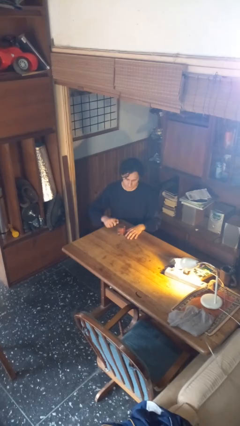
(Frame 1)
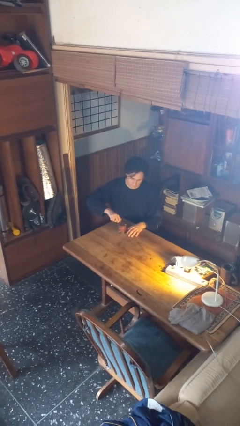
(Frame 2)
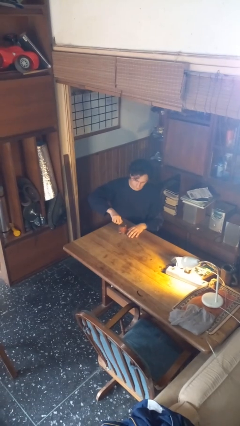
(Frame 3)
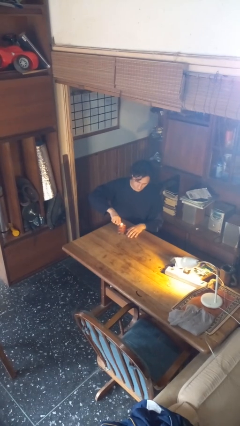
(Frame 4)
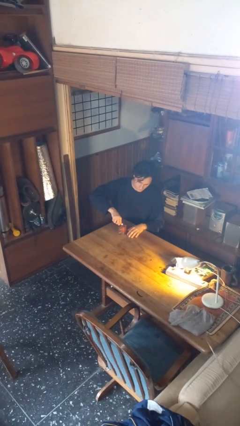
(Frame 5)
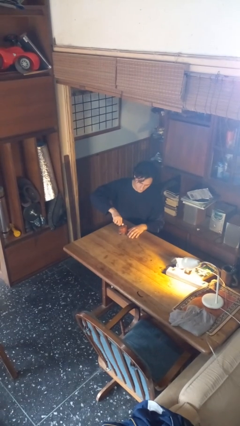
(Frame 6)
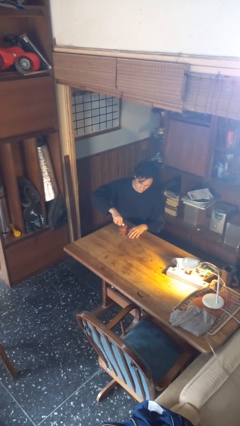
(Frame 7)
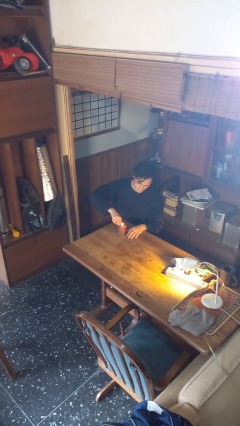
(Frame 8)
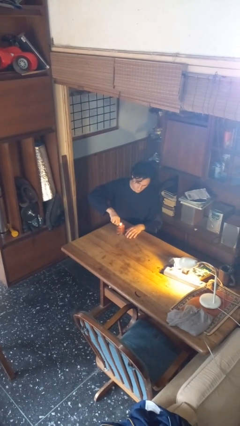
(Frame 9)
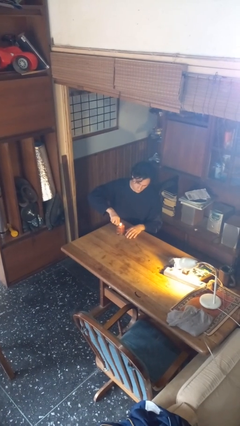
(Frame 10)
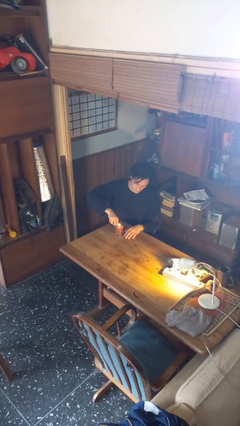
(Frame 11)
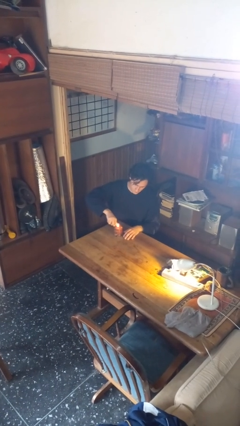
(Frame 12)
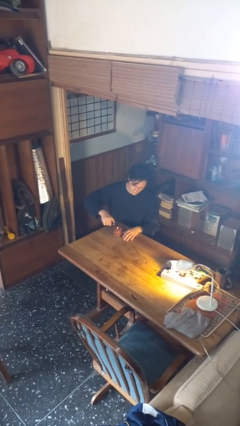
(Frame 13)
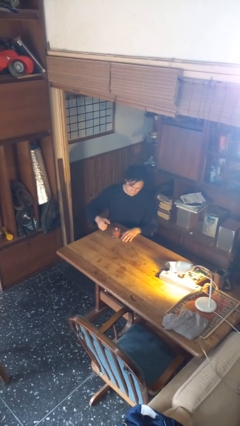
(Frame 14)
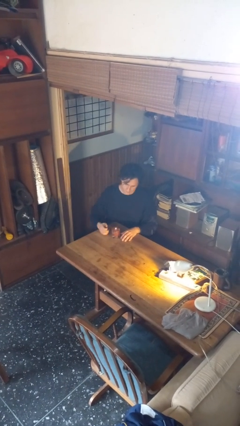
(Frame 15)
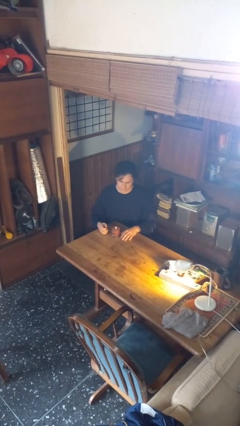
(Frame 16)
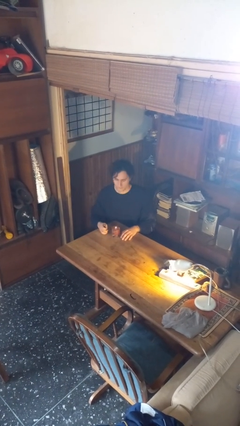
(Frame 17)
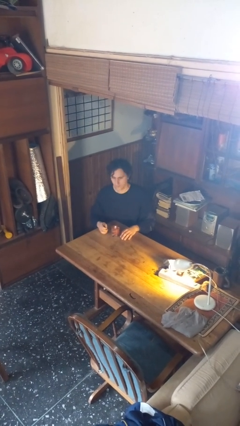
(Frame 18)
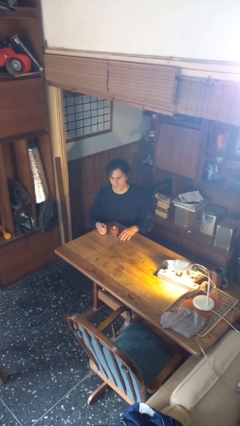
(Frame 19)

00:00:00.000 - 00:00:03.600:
person lights candle

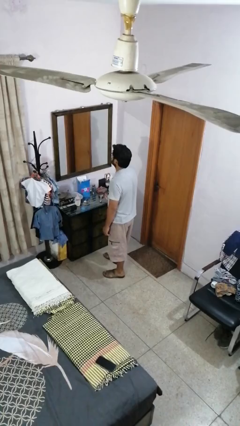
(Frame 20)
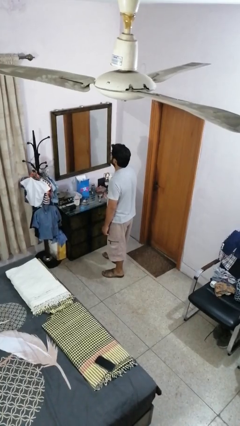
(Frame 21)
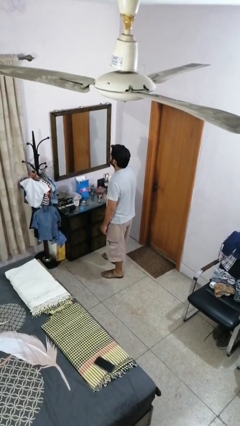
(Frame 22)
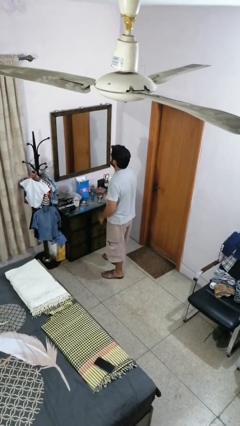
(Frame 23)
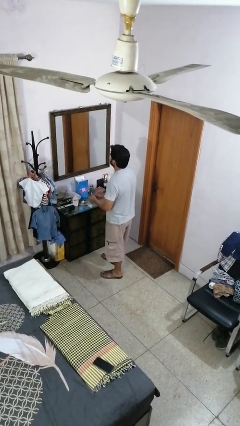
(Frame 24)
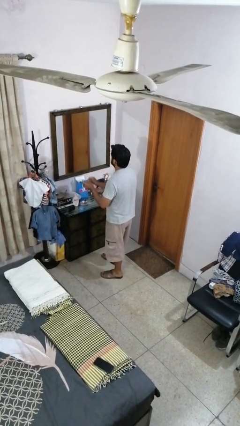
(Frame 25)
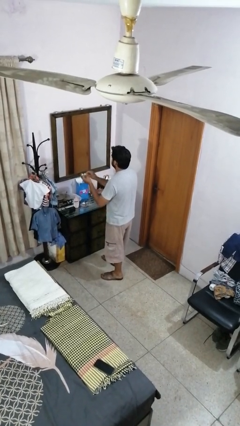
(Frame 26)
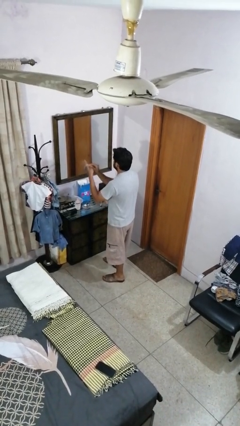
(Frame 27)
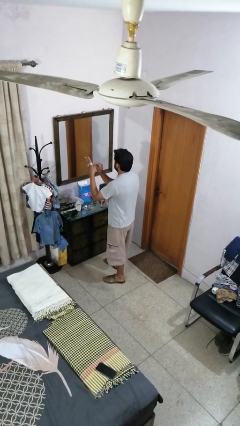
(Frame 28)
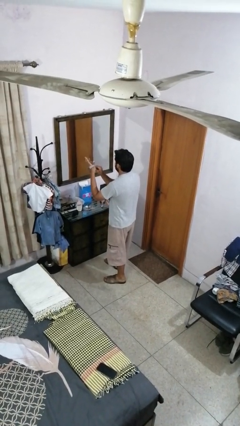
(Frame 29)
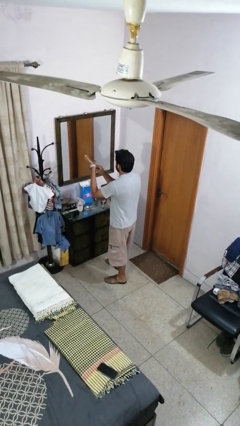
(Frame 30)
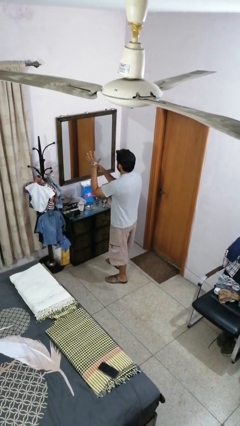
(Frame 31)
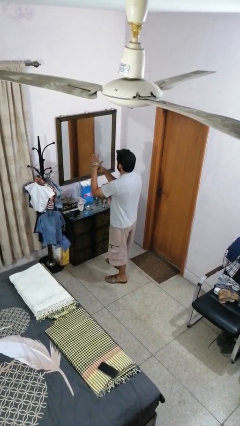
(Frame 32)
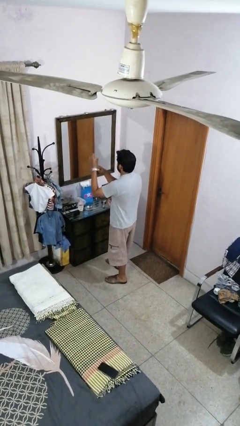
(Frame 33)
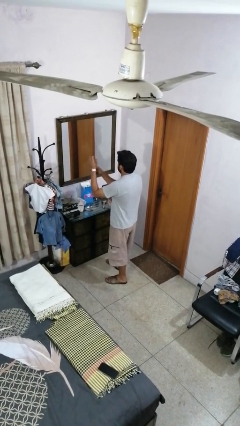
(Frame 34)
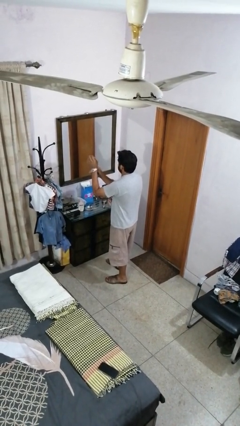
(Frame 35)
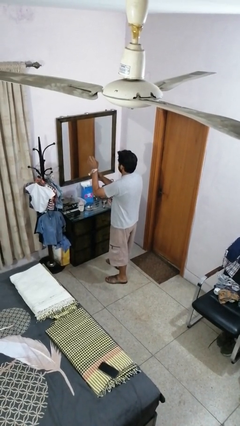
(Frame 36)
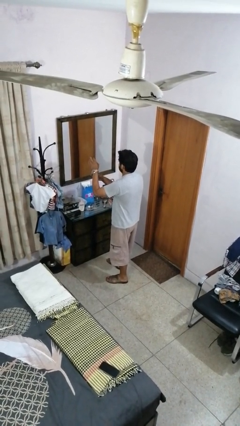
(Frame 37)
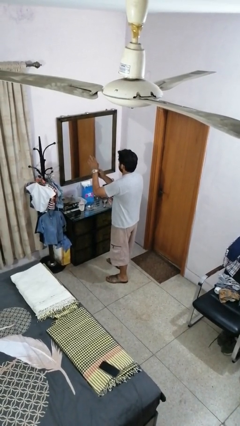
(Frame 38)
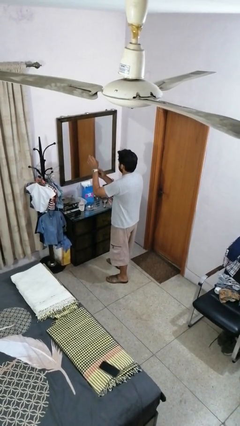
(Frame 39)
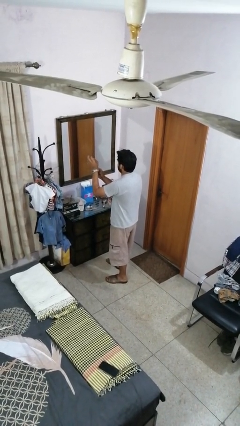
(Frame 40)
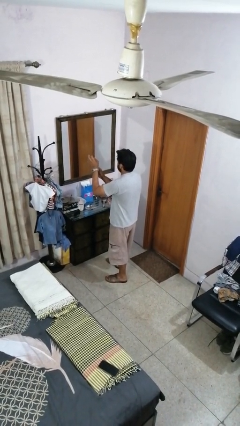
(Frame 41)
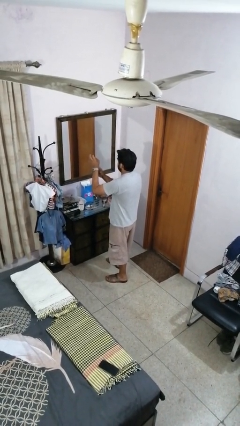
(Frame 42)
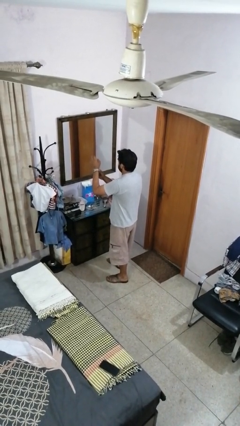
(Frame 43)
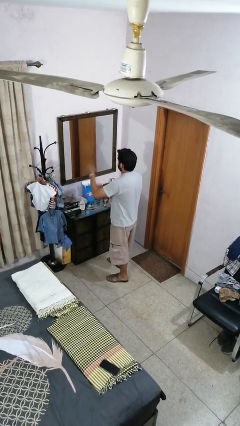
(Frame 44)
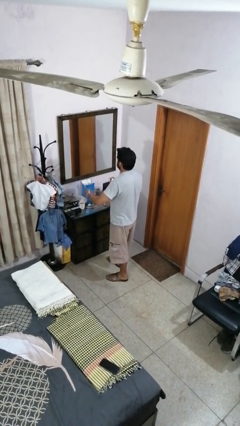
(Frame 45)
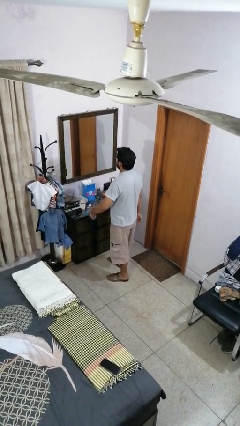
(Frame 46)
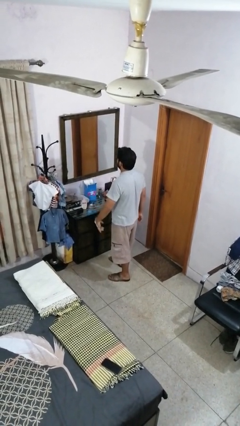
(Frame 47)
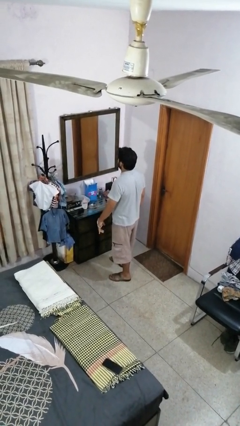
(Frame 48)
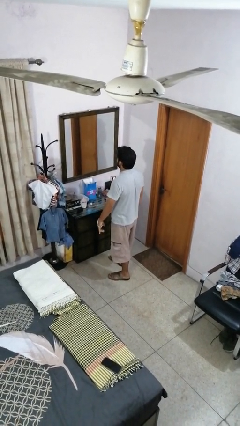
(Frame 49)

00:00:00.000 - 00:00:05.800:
person puts on wristwatch

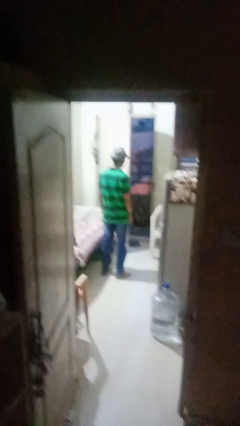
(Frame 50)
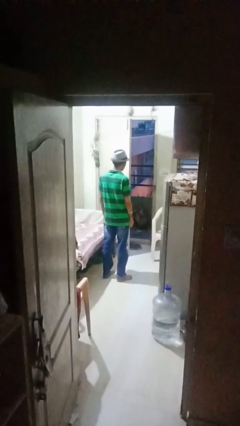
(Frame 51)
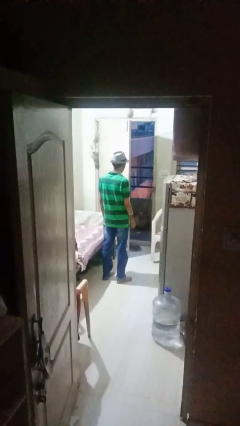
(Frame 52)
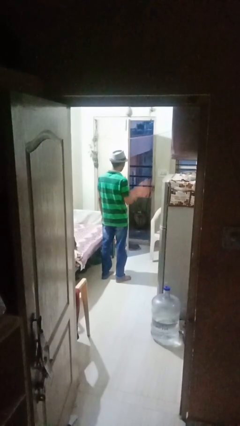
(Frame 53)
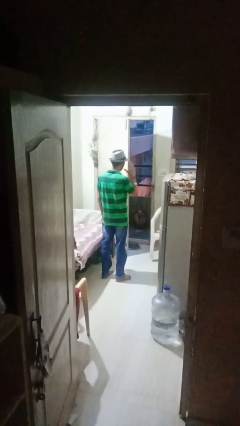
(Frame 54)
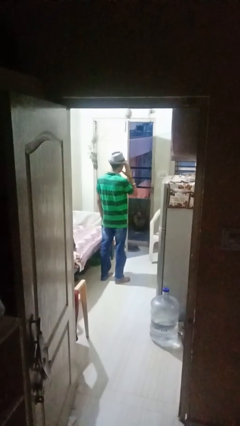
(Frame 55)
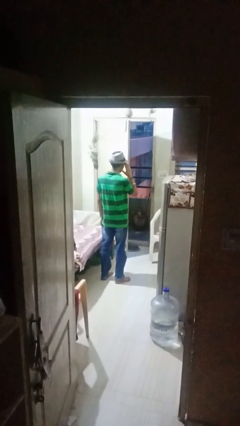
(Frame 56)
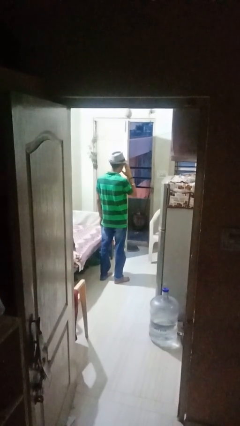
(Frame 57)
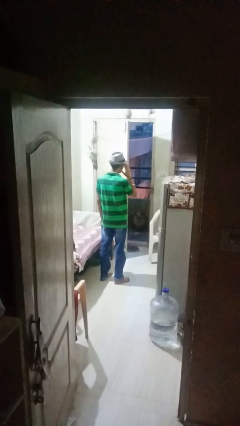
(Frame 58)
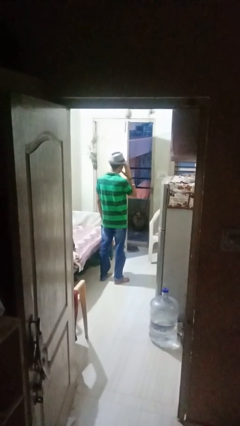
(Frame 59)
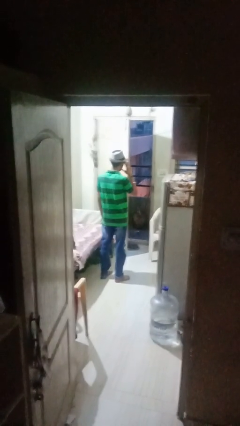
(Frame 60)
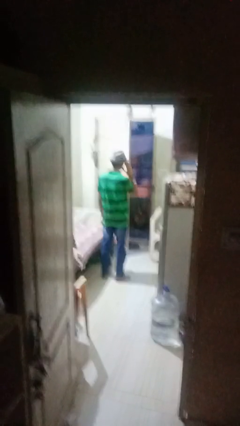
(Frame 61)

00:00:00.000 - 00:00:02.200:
person salutes

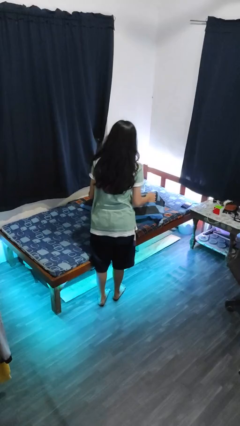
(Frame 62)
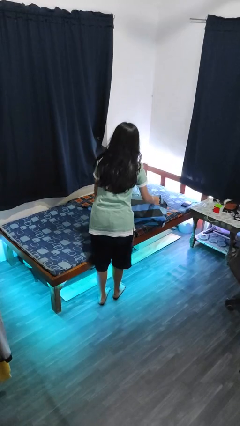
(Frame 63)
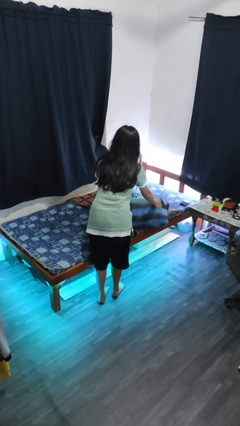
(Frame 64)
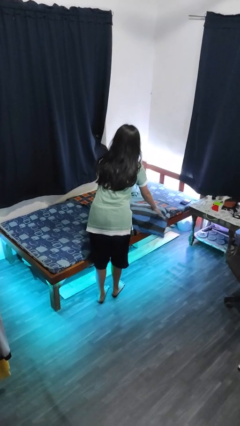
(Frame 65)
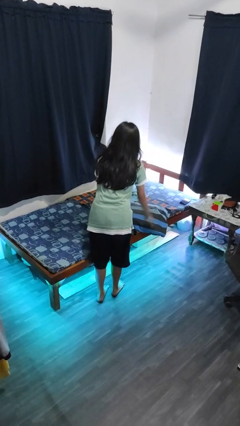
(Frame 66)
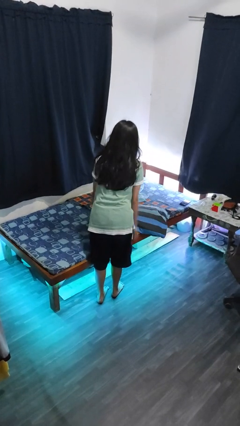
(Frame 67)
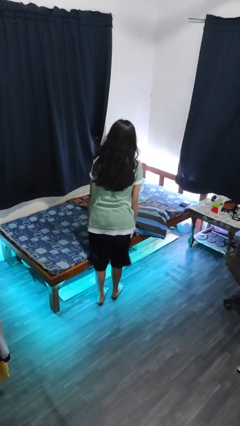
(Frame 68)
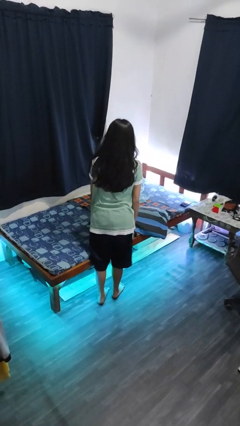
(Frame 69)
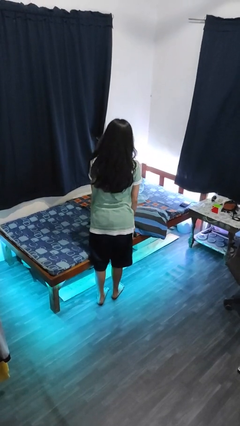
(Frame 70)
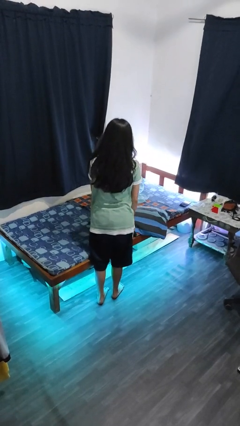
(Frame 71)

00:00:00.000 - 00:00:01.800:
person puts down object on bed

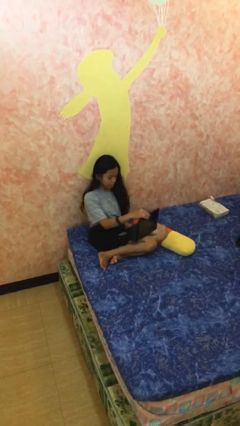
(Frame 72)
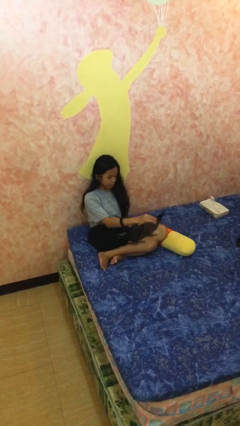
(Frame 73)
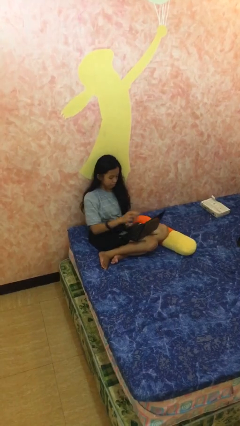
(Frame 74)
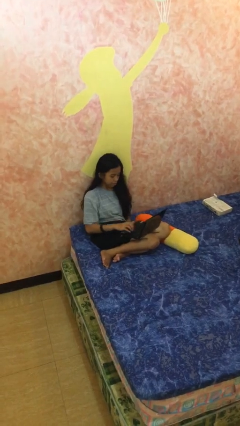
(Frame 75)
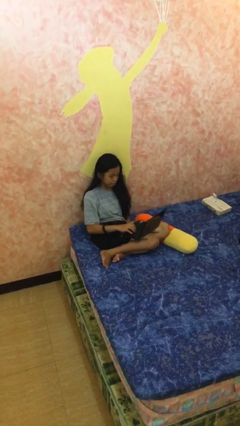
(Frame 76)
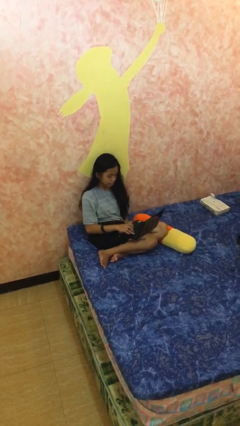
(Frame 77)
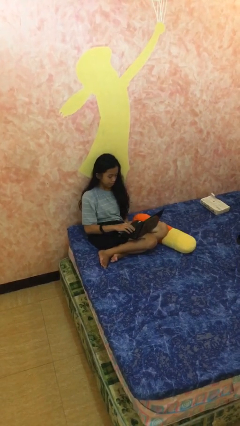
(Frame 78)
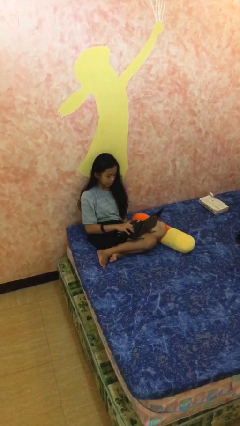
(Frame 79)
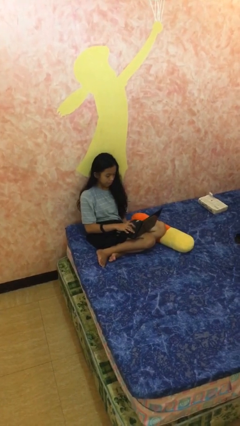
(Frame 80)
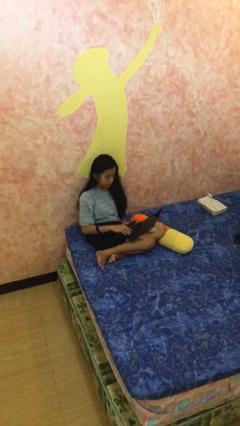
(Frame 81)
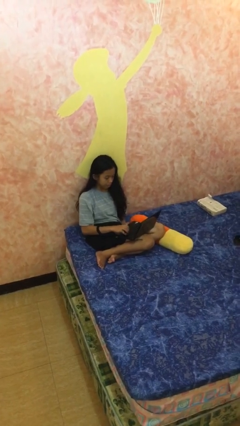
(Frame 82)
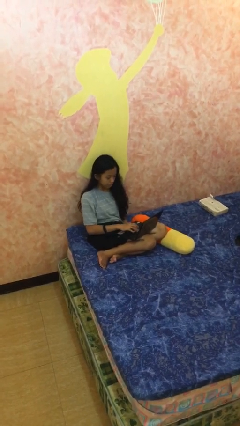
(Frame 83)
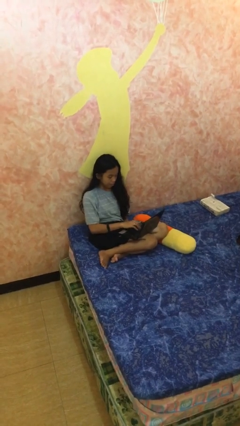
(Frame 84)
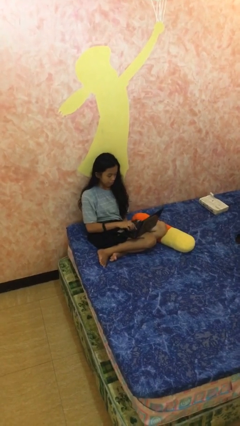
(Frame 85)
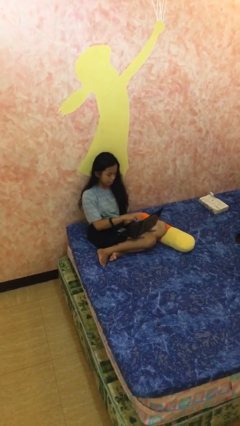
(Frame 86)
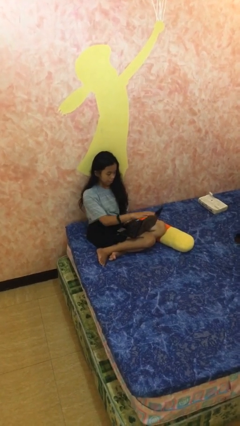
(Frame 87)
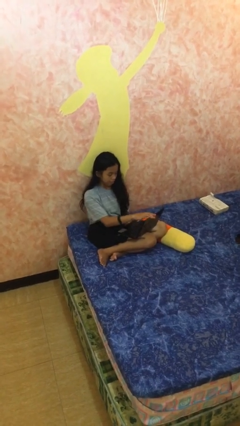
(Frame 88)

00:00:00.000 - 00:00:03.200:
person interacts with laptop

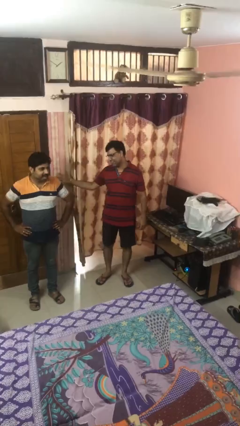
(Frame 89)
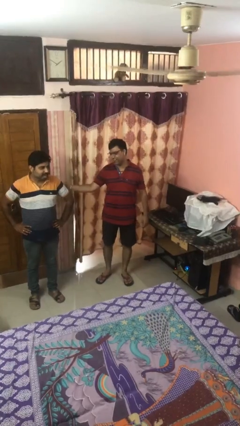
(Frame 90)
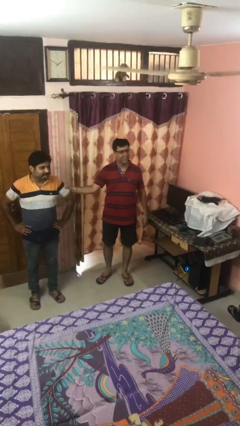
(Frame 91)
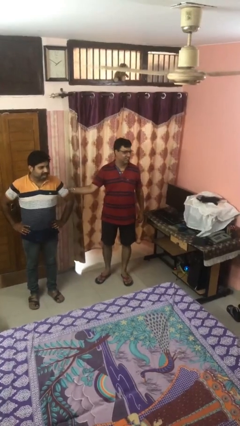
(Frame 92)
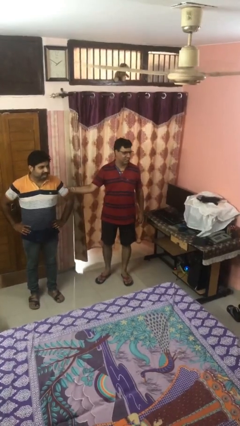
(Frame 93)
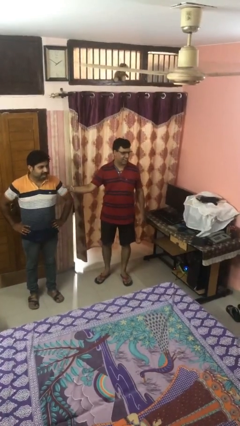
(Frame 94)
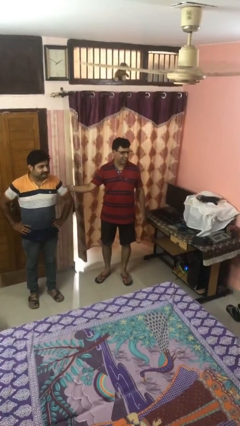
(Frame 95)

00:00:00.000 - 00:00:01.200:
person grabs person by bicep
